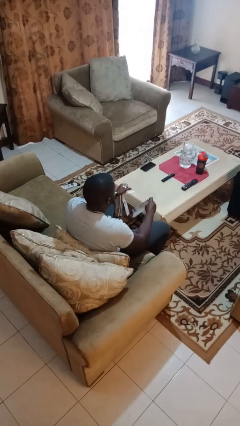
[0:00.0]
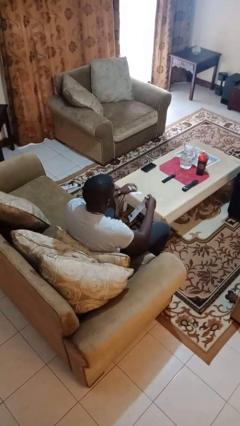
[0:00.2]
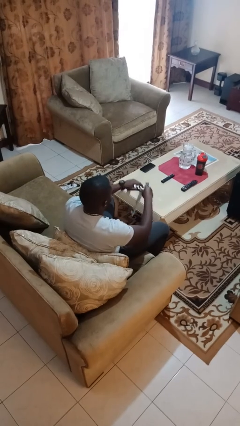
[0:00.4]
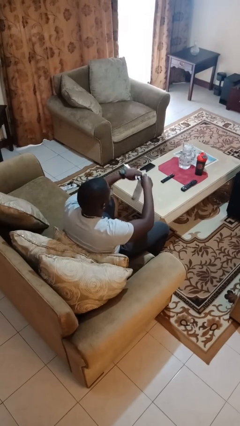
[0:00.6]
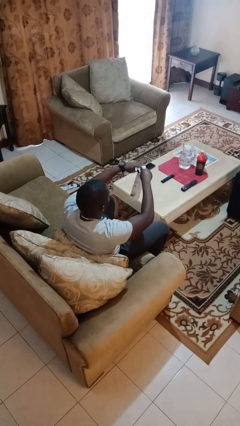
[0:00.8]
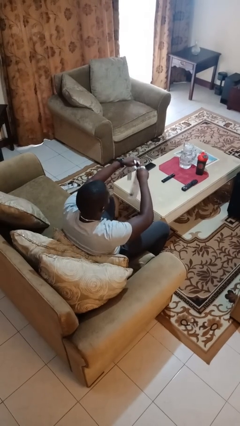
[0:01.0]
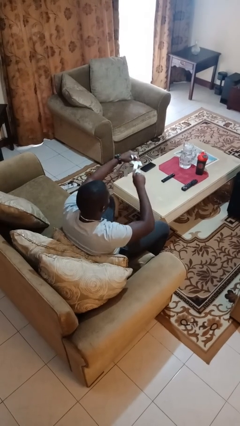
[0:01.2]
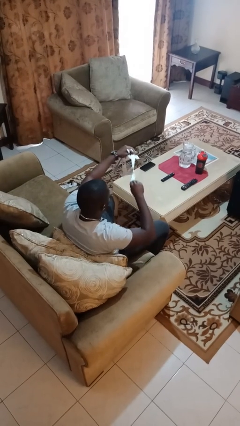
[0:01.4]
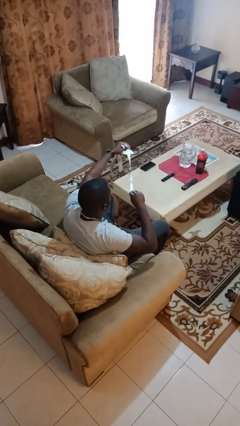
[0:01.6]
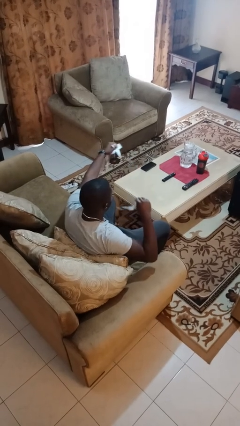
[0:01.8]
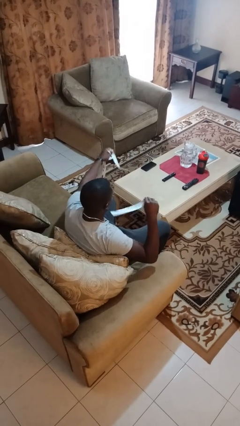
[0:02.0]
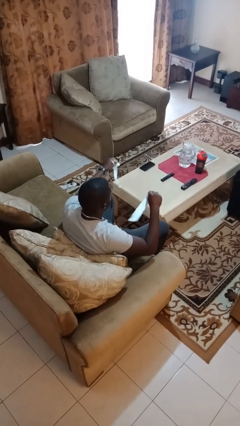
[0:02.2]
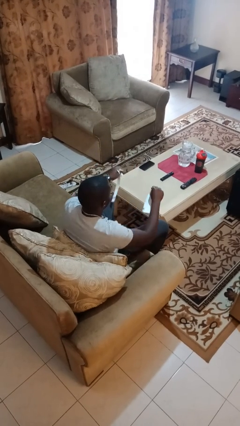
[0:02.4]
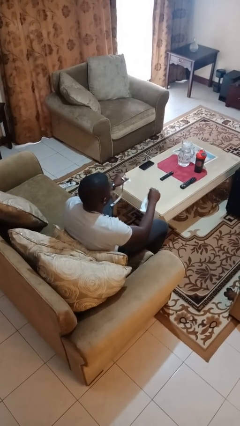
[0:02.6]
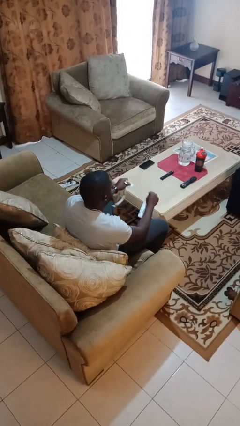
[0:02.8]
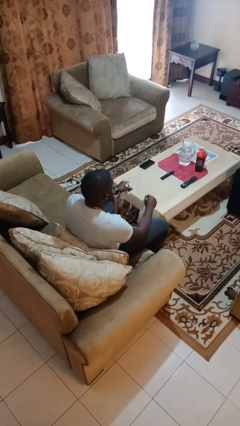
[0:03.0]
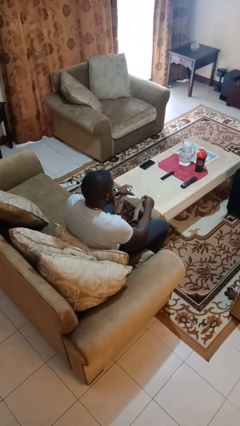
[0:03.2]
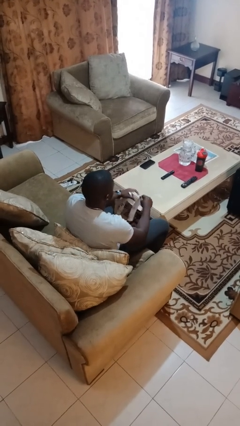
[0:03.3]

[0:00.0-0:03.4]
person tears paper

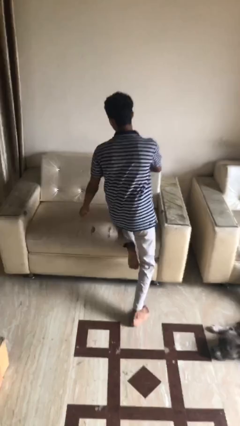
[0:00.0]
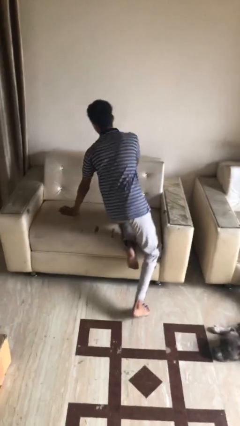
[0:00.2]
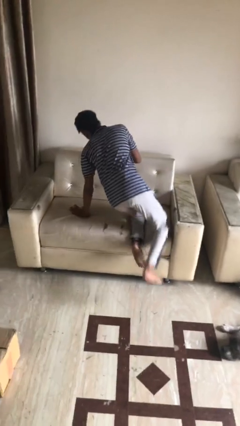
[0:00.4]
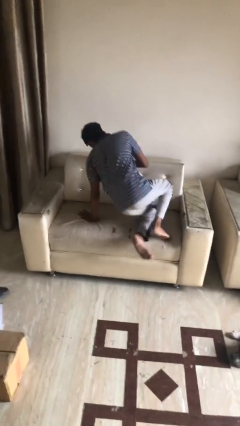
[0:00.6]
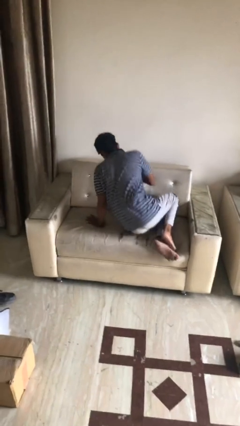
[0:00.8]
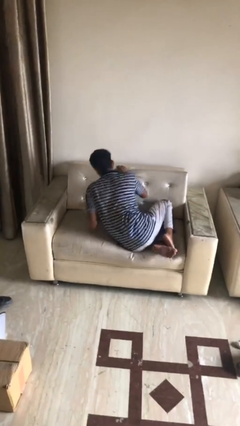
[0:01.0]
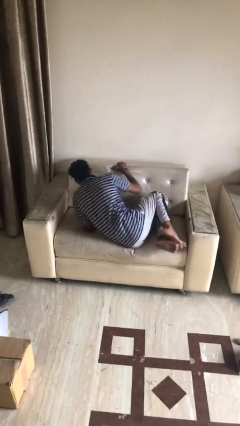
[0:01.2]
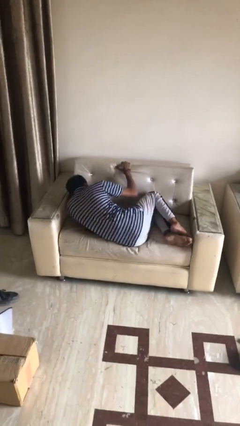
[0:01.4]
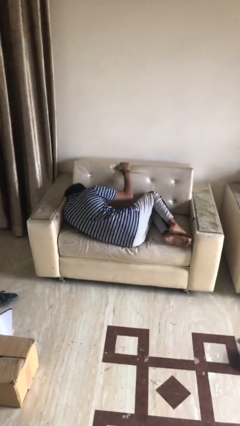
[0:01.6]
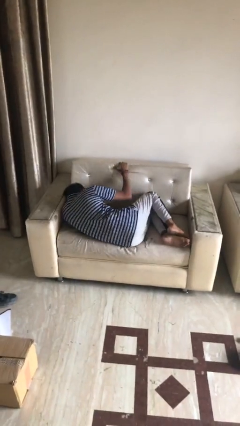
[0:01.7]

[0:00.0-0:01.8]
person lies down on bed

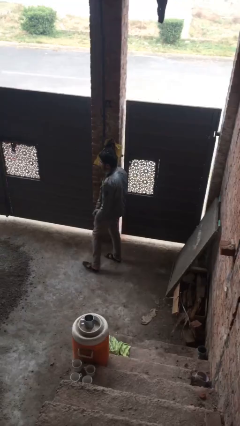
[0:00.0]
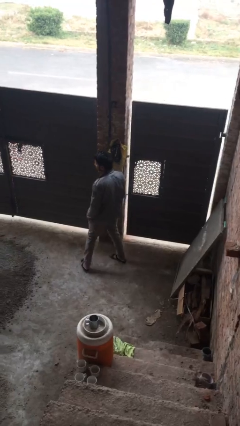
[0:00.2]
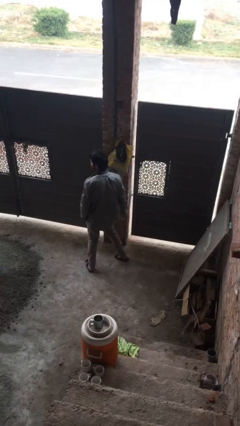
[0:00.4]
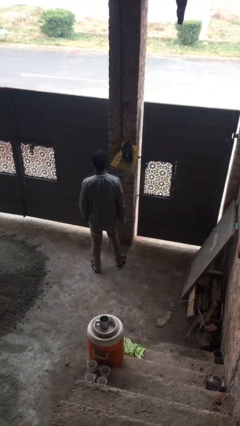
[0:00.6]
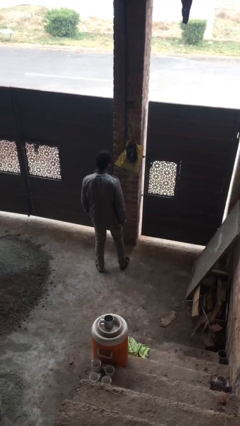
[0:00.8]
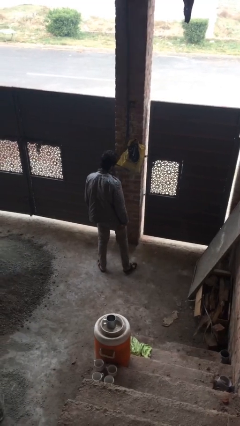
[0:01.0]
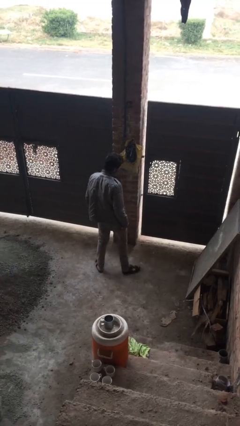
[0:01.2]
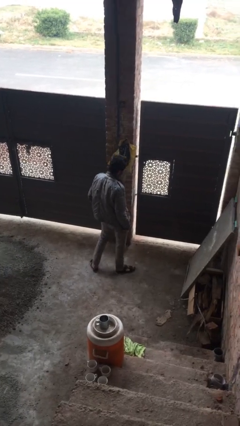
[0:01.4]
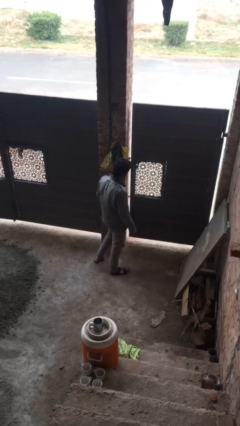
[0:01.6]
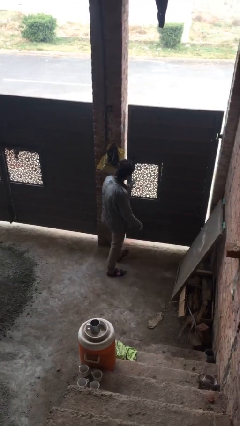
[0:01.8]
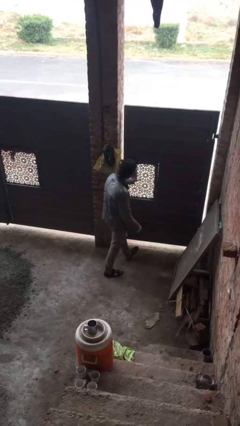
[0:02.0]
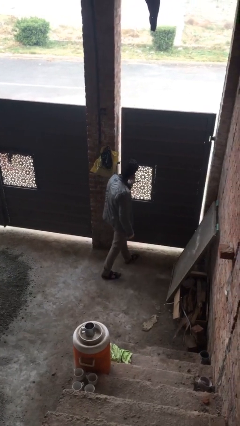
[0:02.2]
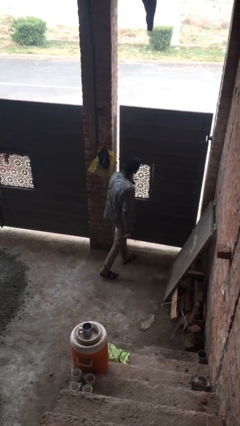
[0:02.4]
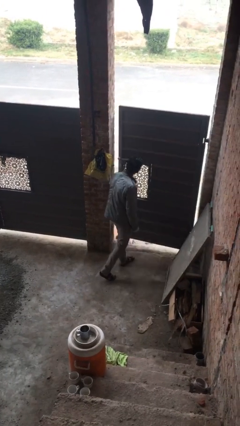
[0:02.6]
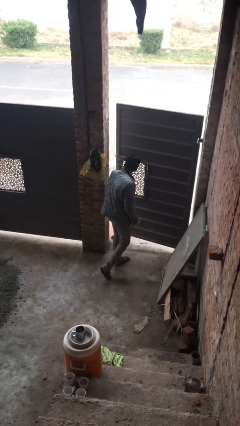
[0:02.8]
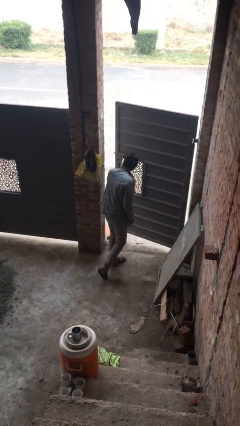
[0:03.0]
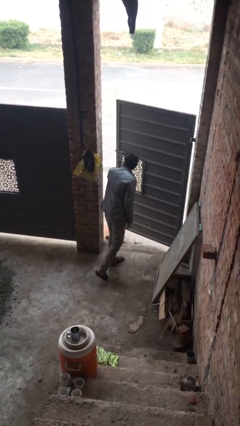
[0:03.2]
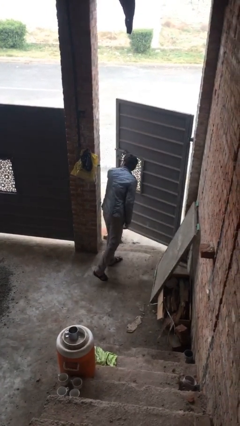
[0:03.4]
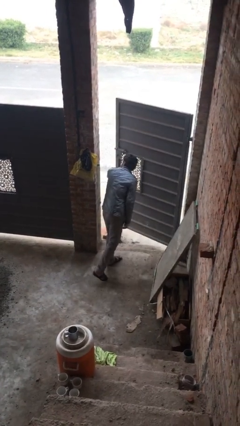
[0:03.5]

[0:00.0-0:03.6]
person opens facility door

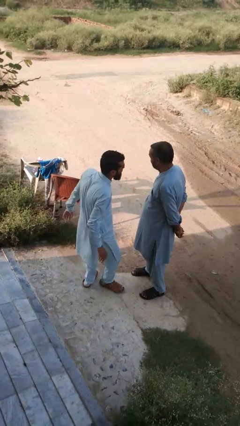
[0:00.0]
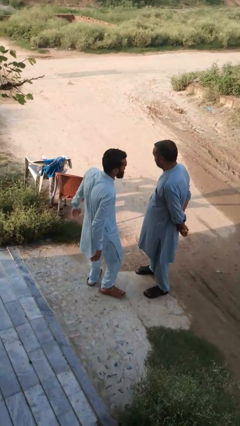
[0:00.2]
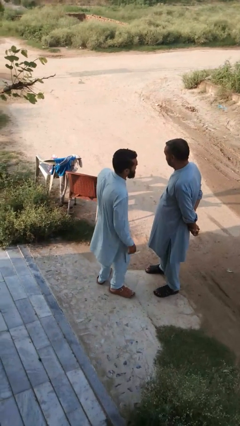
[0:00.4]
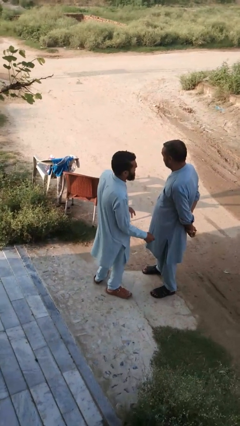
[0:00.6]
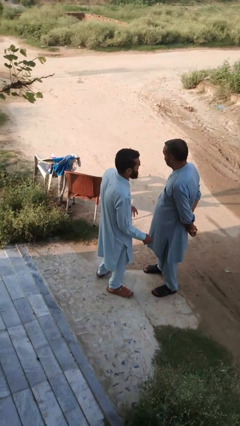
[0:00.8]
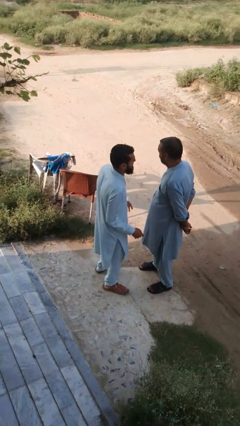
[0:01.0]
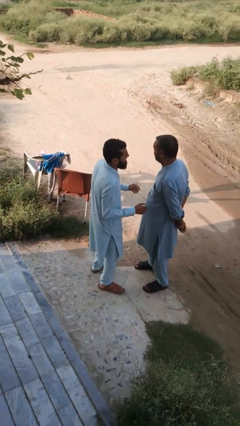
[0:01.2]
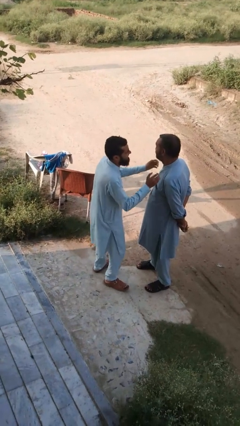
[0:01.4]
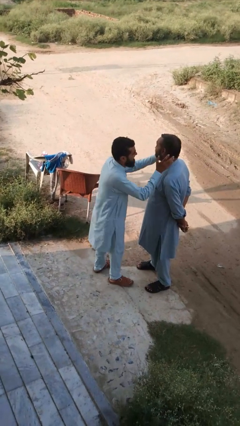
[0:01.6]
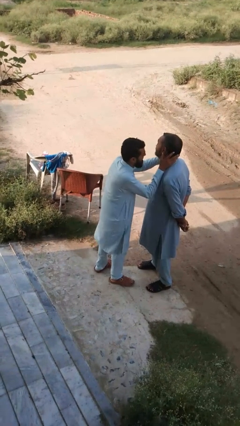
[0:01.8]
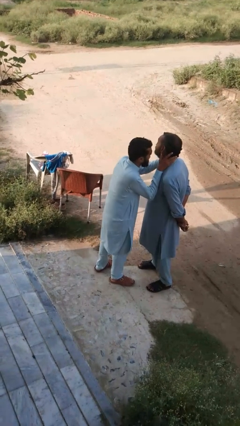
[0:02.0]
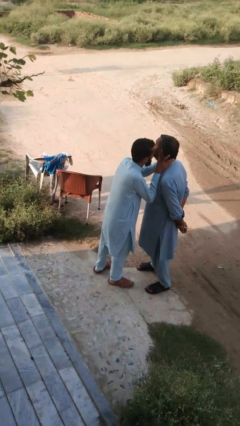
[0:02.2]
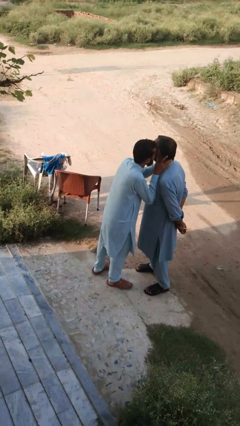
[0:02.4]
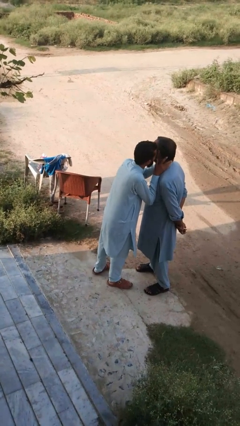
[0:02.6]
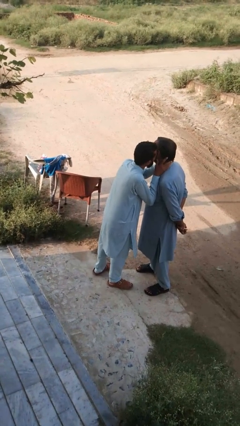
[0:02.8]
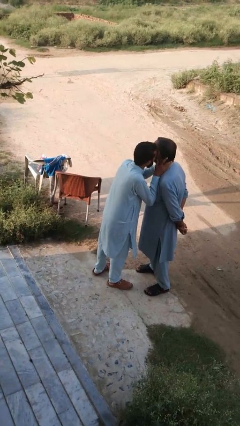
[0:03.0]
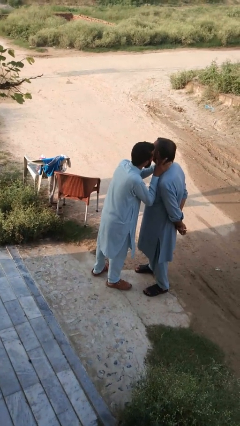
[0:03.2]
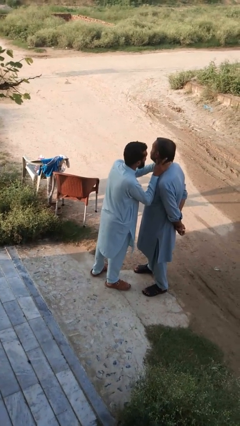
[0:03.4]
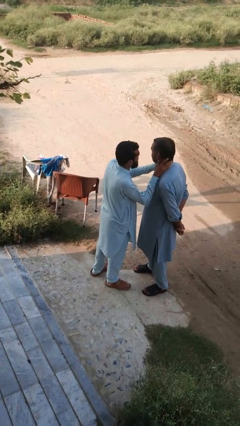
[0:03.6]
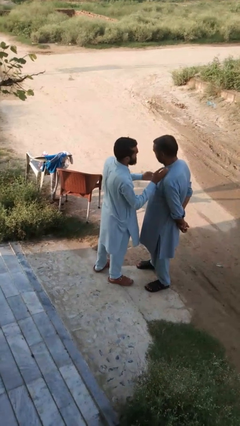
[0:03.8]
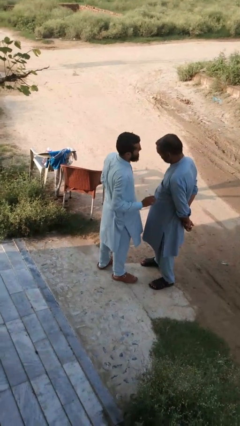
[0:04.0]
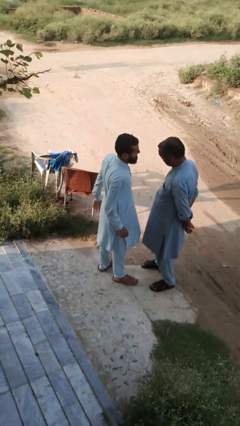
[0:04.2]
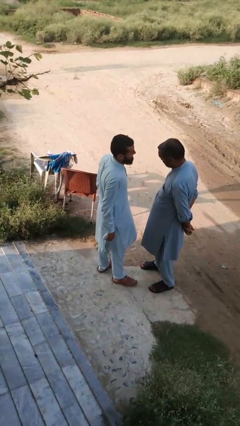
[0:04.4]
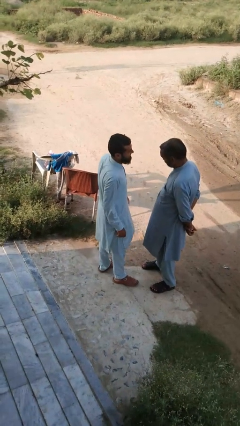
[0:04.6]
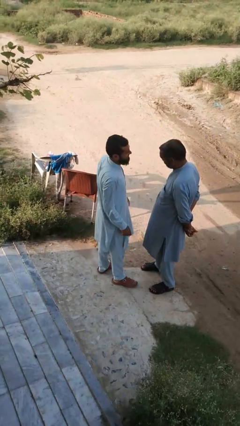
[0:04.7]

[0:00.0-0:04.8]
person kisses cheek of person

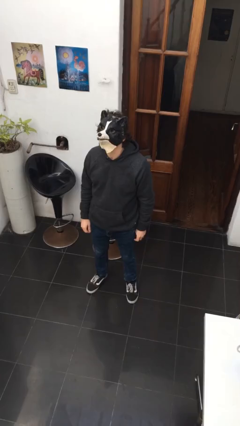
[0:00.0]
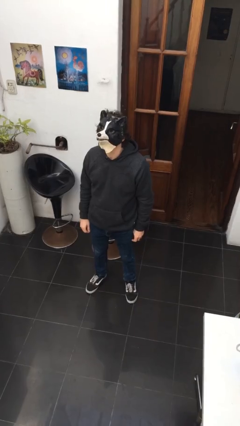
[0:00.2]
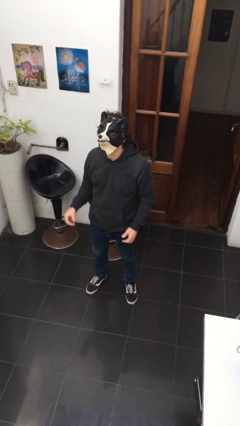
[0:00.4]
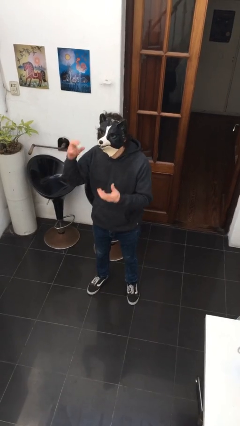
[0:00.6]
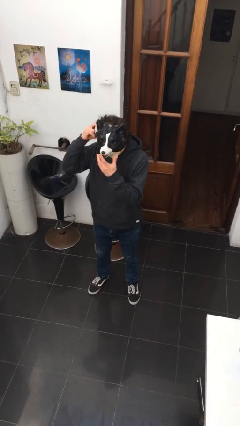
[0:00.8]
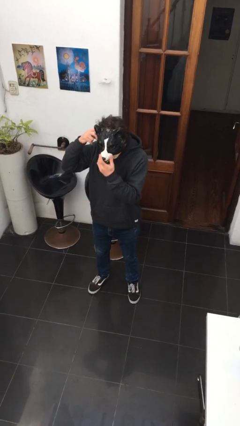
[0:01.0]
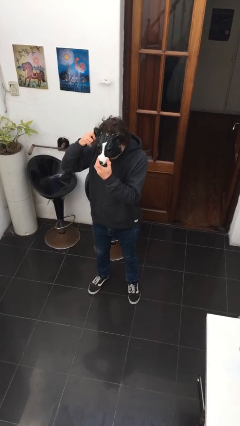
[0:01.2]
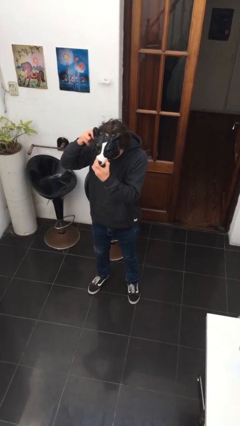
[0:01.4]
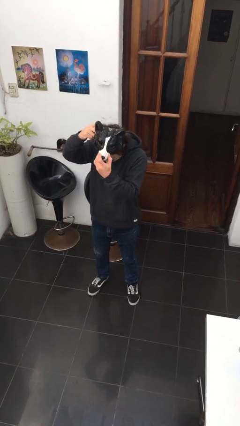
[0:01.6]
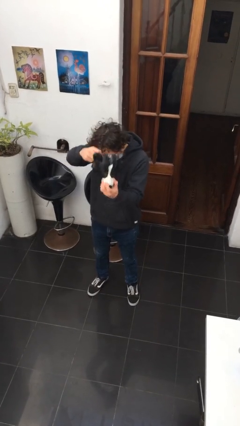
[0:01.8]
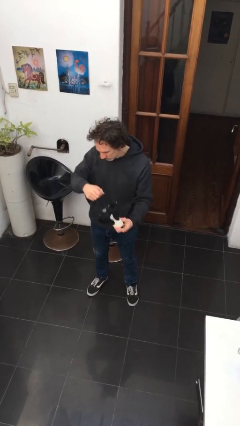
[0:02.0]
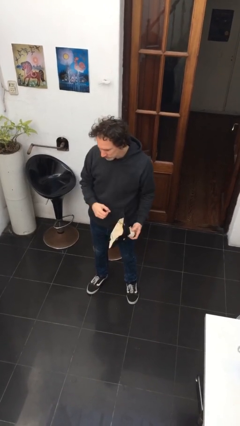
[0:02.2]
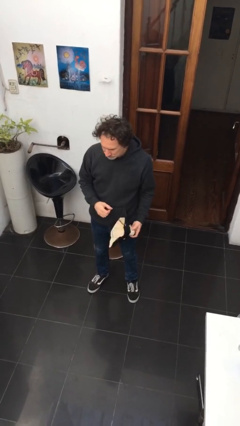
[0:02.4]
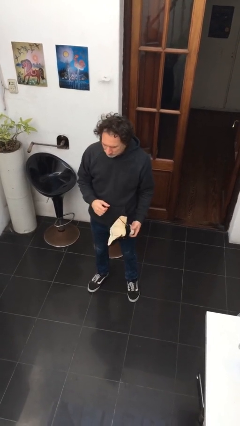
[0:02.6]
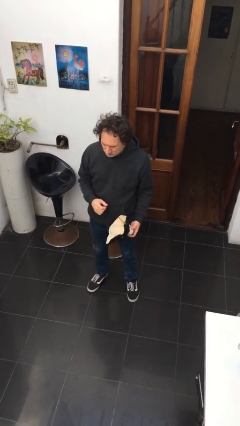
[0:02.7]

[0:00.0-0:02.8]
person takes off facemask

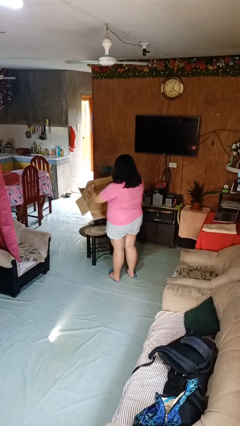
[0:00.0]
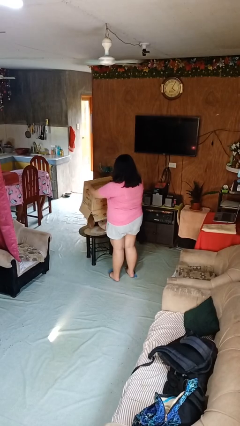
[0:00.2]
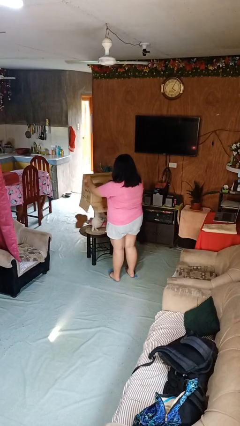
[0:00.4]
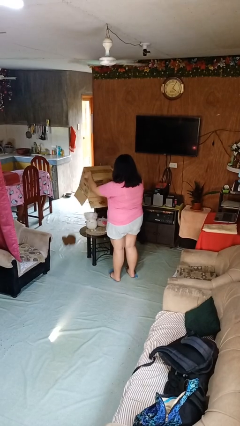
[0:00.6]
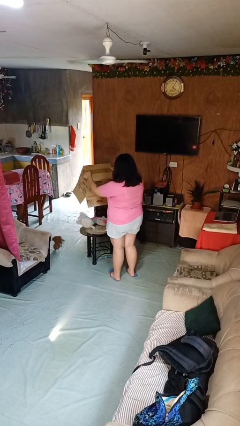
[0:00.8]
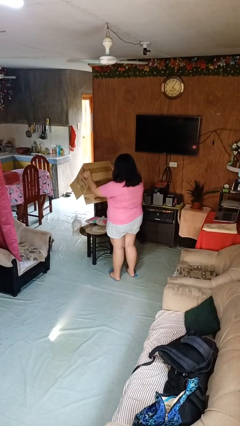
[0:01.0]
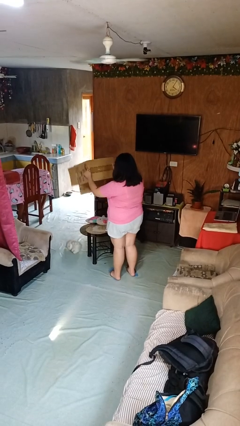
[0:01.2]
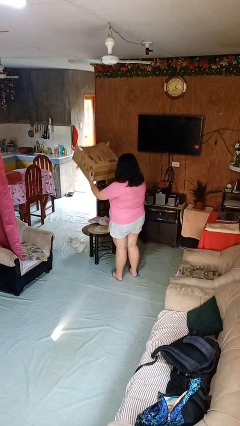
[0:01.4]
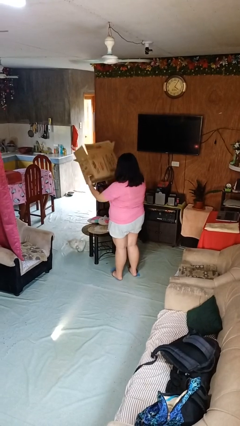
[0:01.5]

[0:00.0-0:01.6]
person unloads box onto table
